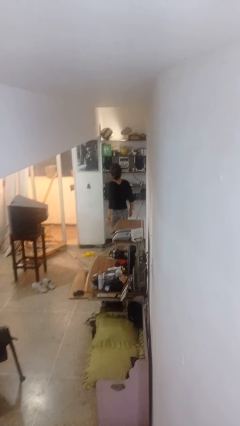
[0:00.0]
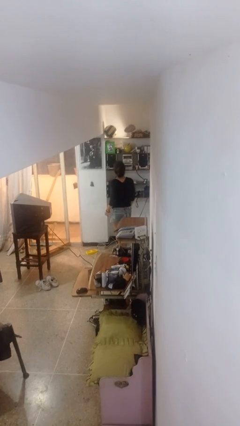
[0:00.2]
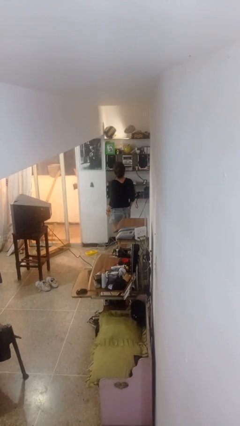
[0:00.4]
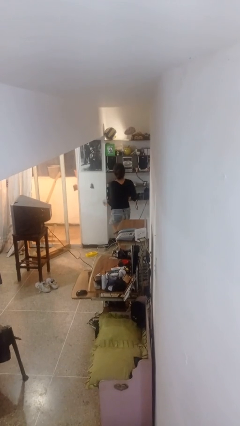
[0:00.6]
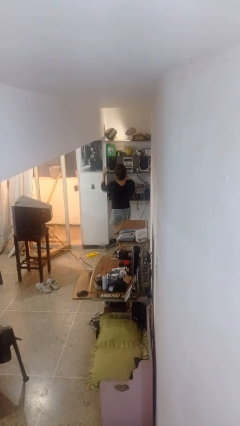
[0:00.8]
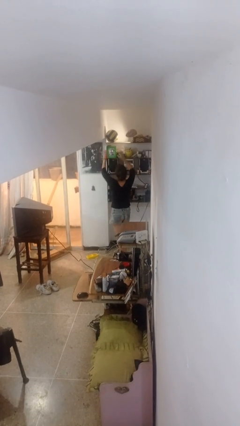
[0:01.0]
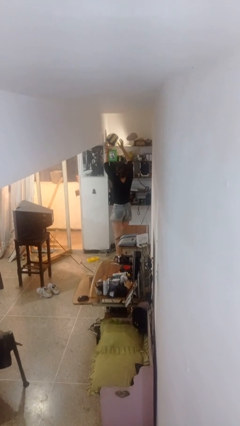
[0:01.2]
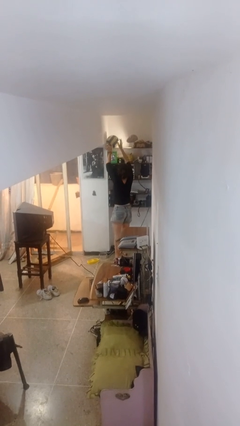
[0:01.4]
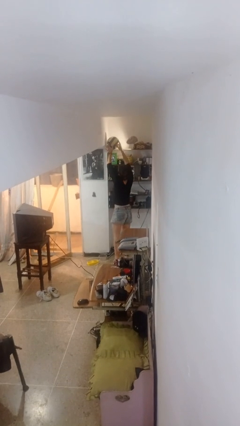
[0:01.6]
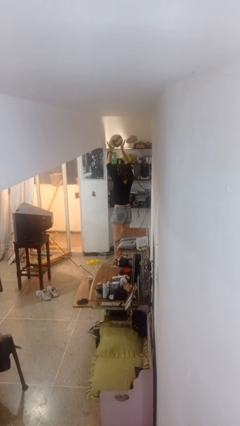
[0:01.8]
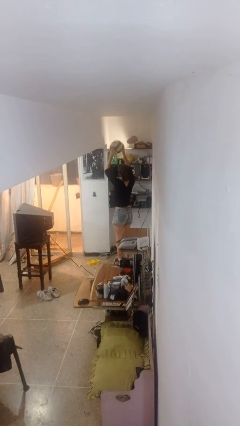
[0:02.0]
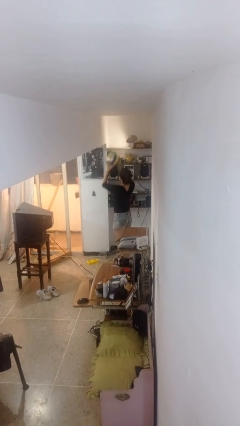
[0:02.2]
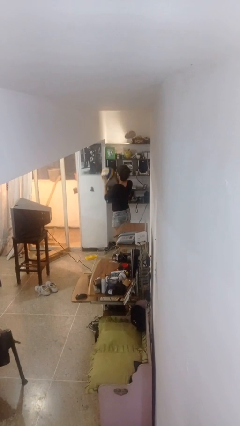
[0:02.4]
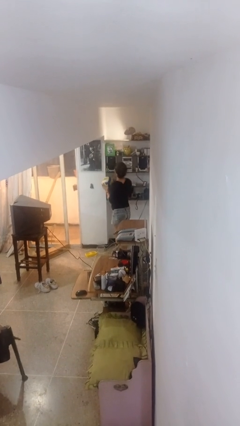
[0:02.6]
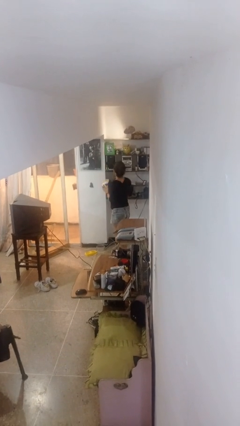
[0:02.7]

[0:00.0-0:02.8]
person picks up object from shelf

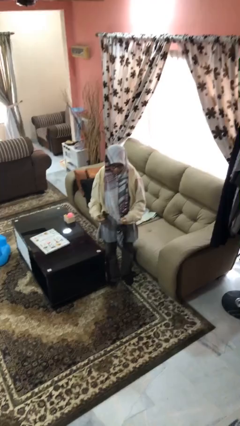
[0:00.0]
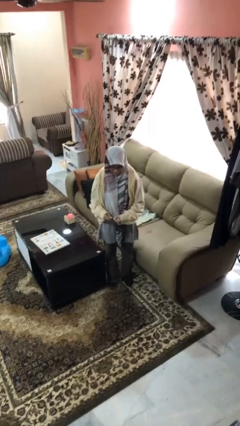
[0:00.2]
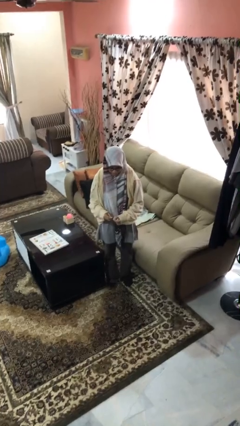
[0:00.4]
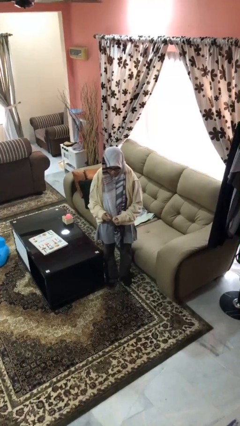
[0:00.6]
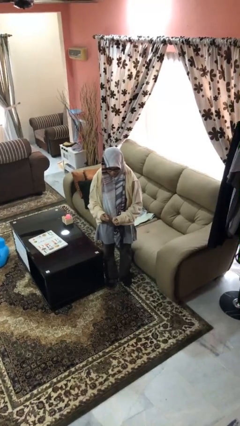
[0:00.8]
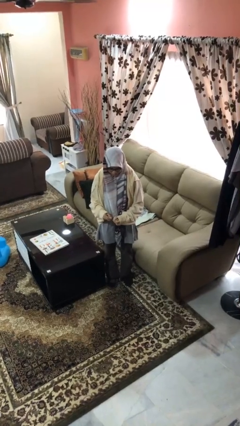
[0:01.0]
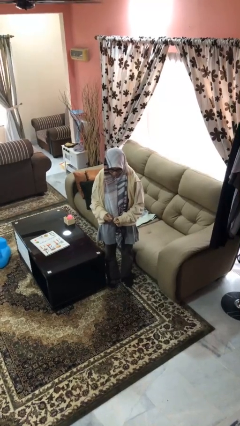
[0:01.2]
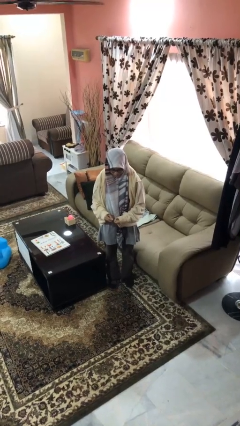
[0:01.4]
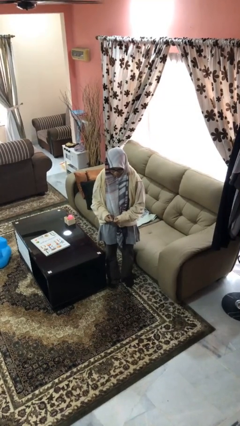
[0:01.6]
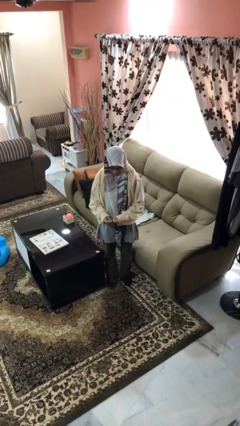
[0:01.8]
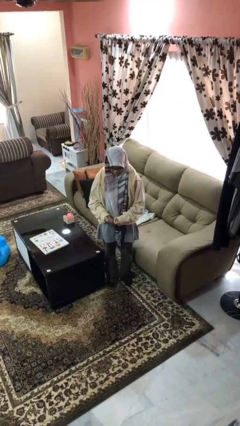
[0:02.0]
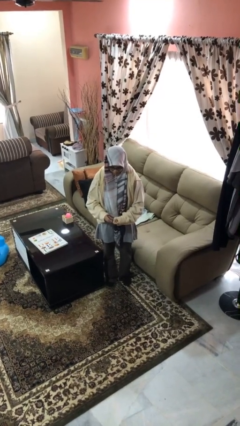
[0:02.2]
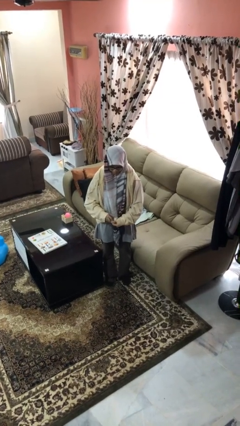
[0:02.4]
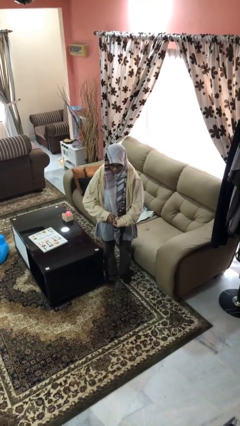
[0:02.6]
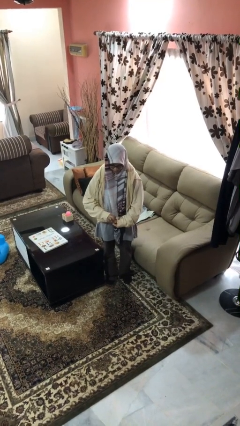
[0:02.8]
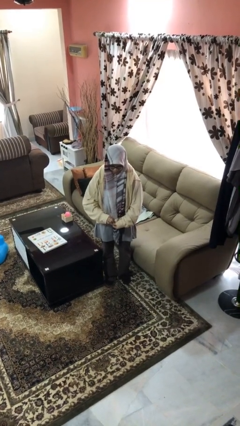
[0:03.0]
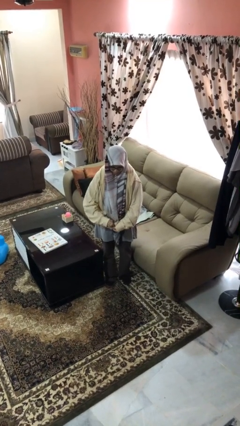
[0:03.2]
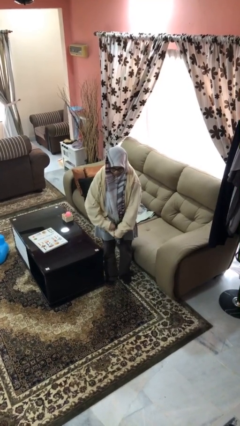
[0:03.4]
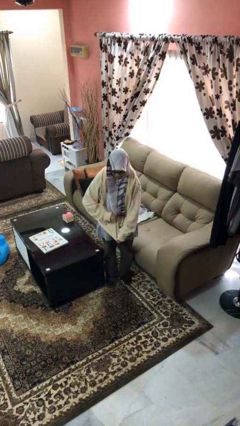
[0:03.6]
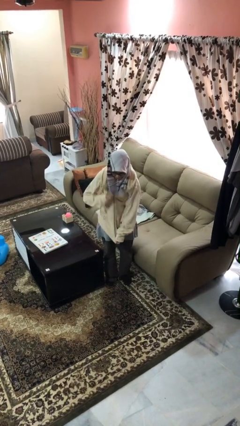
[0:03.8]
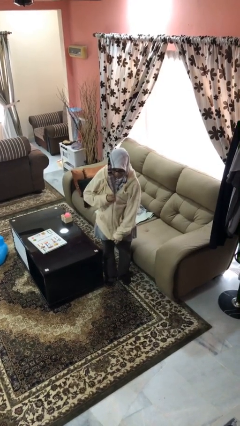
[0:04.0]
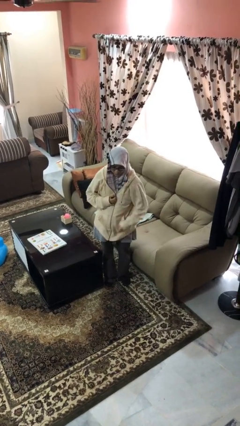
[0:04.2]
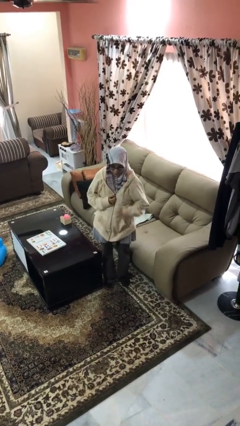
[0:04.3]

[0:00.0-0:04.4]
person zips up jacket

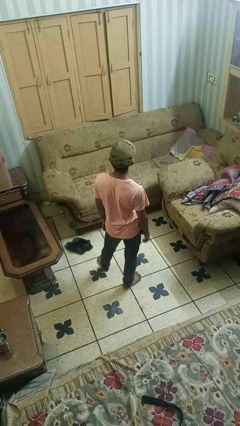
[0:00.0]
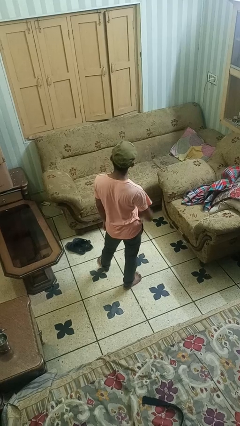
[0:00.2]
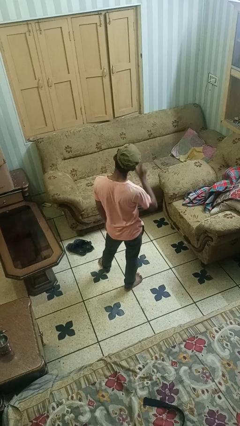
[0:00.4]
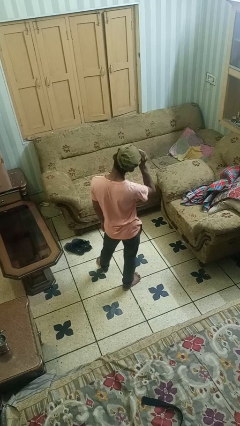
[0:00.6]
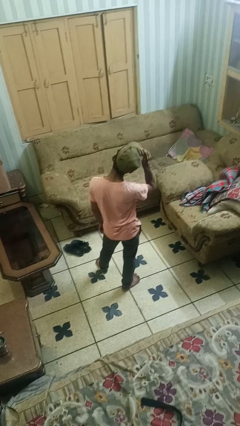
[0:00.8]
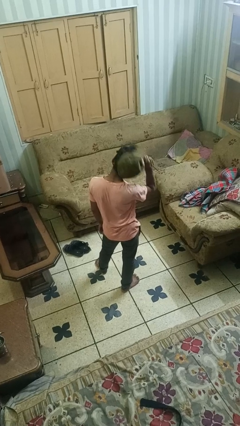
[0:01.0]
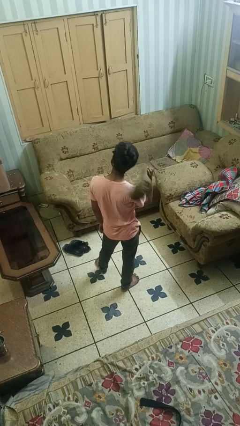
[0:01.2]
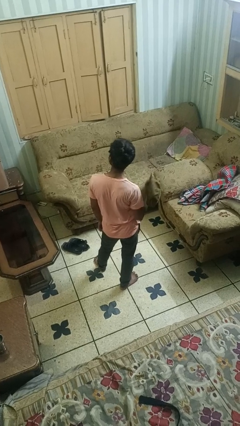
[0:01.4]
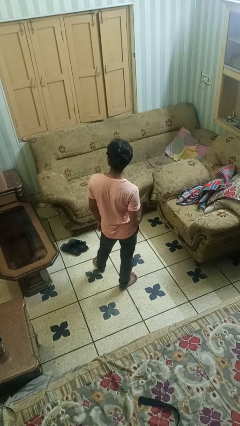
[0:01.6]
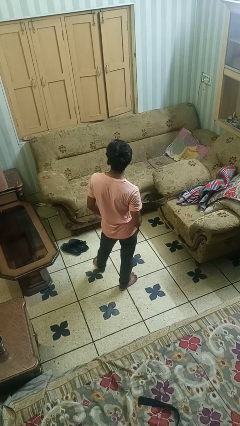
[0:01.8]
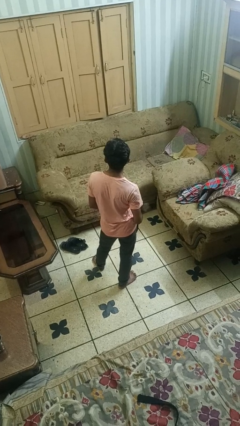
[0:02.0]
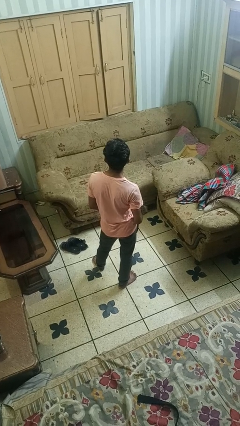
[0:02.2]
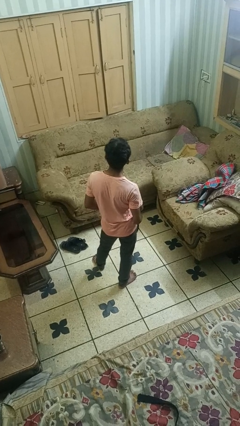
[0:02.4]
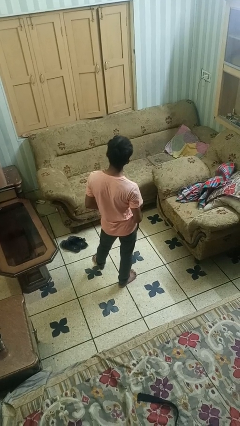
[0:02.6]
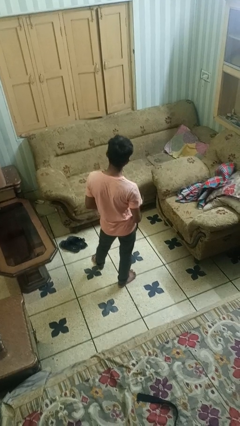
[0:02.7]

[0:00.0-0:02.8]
person takes off hat

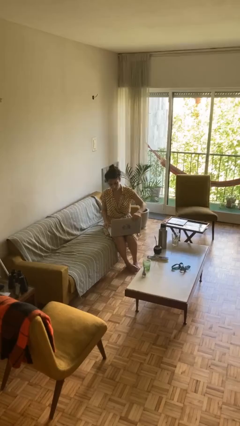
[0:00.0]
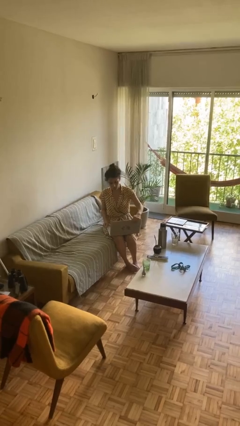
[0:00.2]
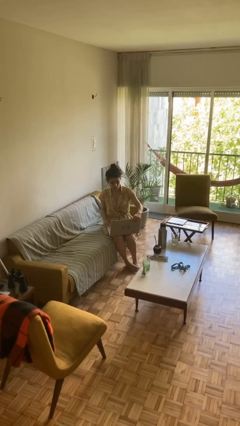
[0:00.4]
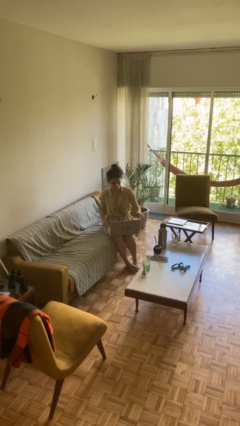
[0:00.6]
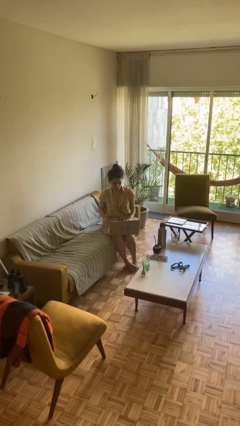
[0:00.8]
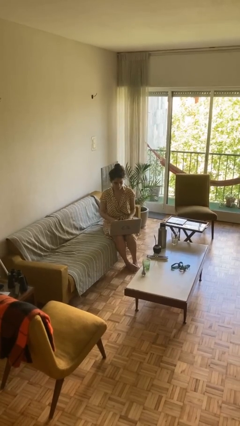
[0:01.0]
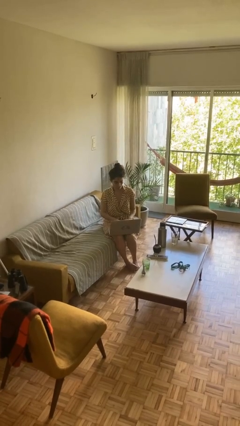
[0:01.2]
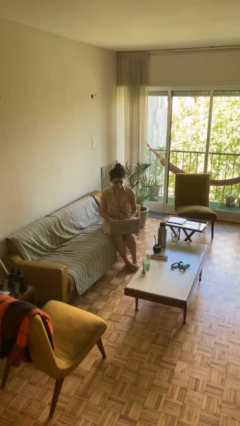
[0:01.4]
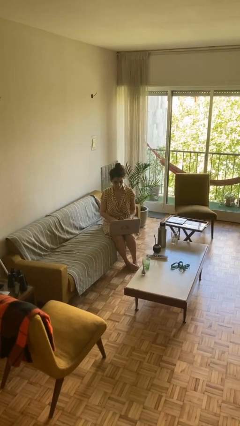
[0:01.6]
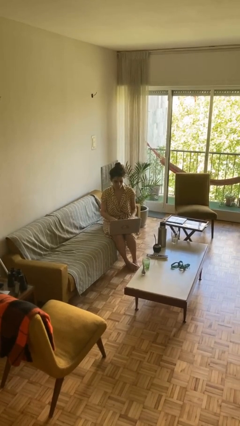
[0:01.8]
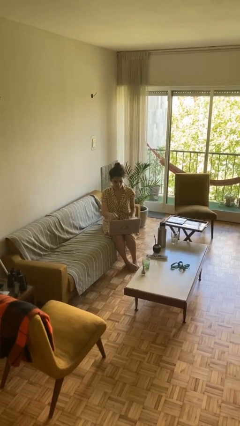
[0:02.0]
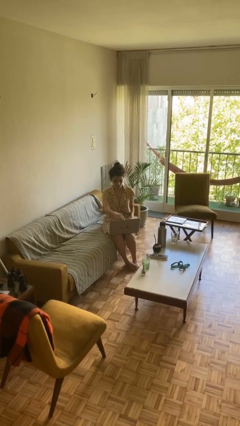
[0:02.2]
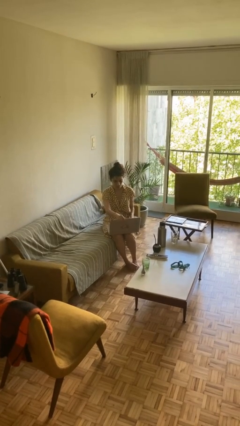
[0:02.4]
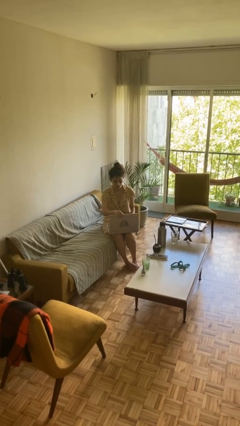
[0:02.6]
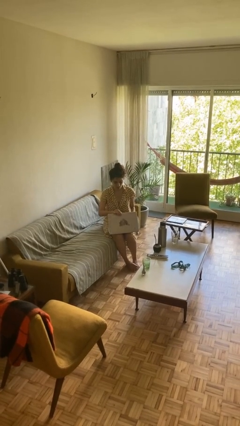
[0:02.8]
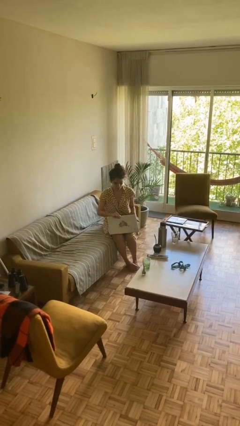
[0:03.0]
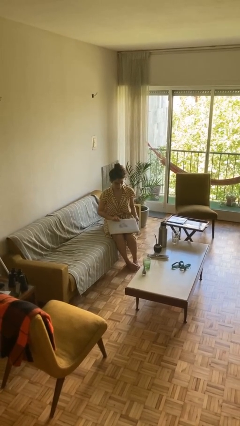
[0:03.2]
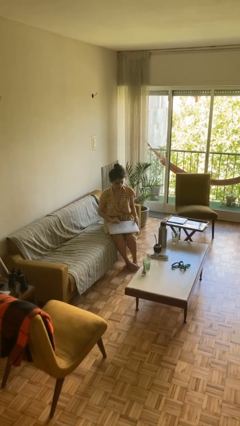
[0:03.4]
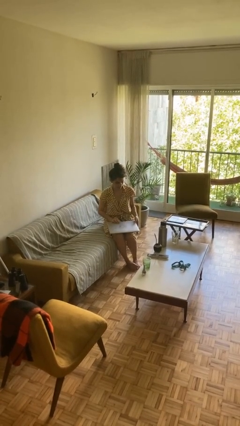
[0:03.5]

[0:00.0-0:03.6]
person interacts with laptop

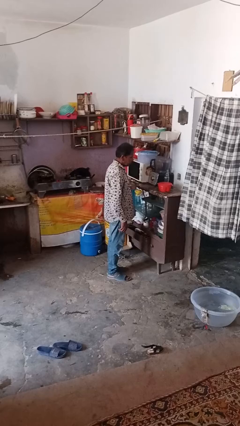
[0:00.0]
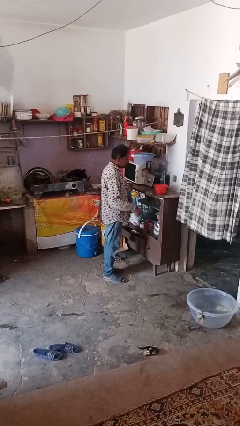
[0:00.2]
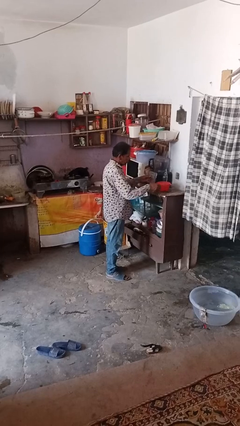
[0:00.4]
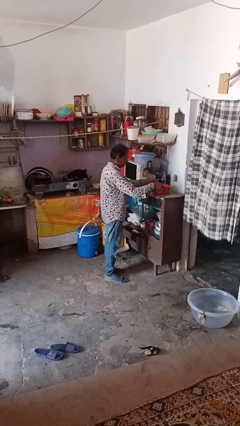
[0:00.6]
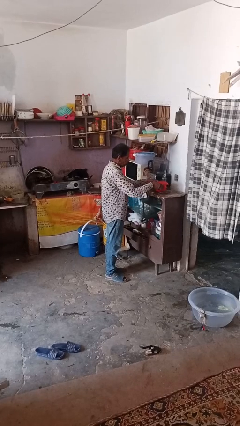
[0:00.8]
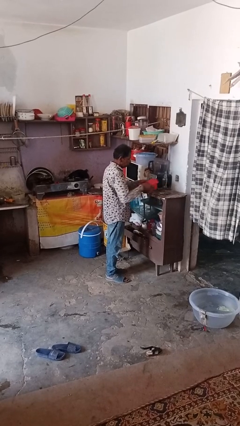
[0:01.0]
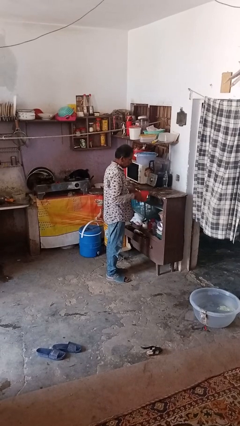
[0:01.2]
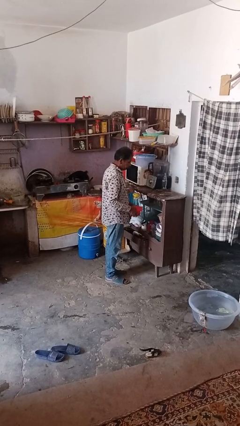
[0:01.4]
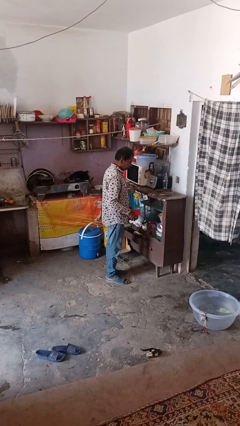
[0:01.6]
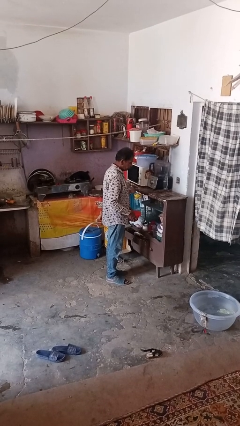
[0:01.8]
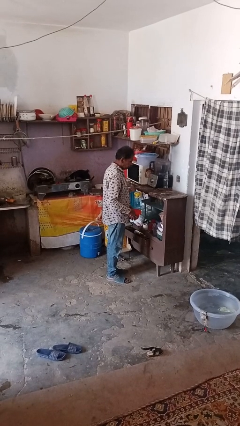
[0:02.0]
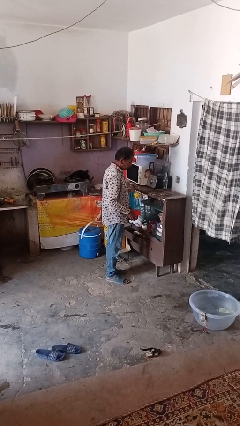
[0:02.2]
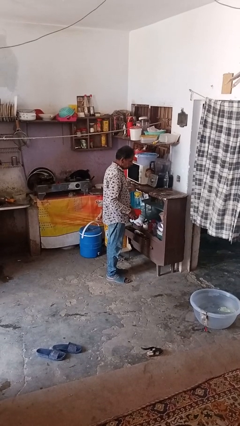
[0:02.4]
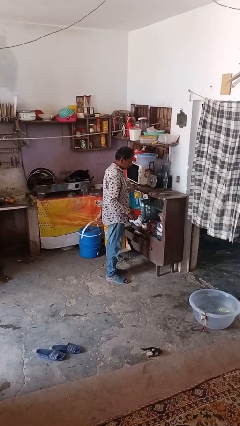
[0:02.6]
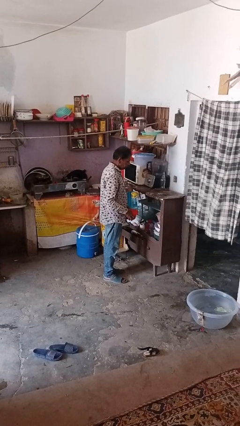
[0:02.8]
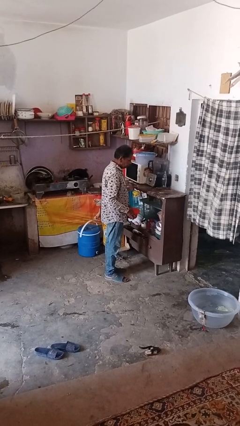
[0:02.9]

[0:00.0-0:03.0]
person picks up object from countertop

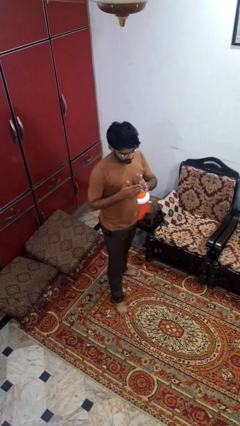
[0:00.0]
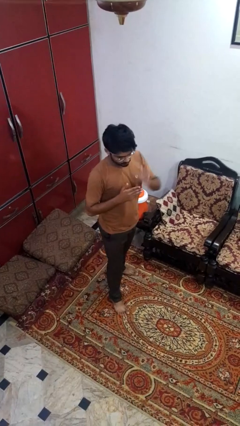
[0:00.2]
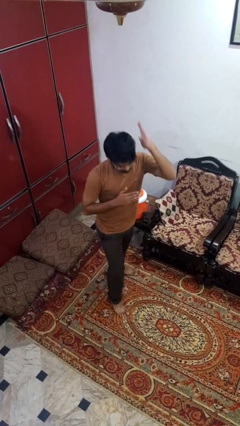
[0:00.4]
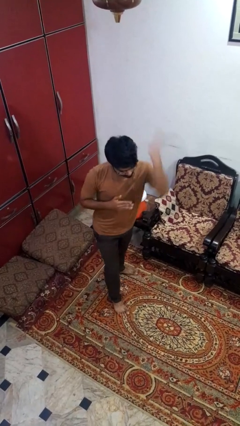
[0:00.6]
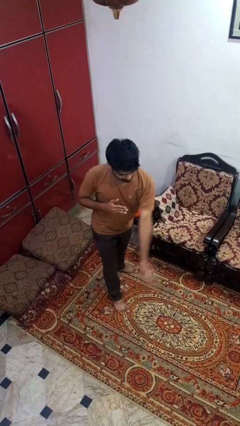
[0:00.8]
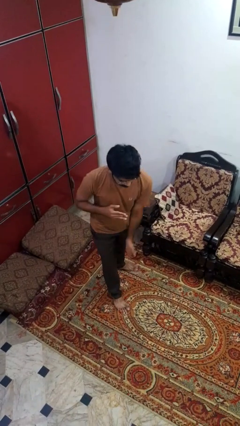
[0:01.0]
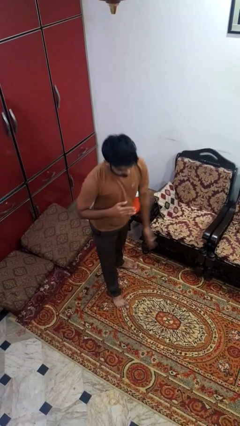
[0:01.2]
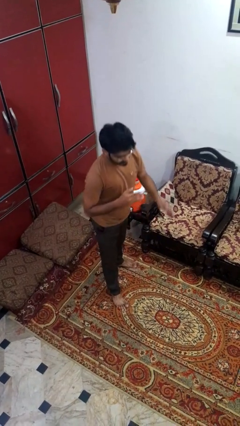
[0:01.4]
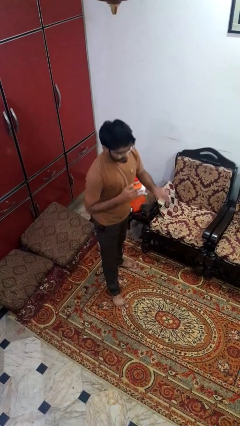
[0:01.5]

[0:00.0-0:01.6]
person karate chop
